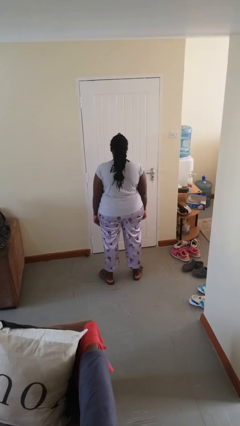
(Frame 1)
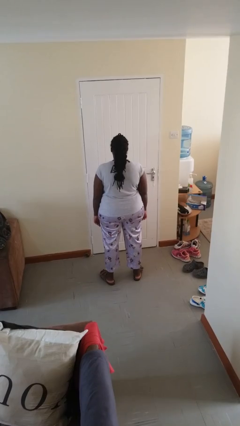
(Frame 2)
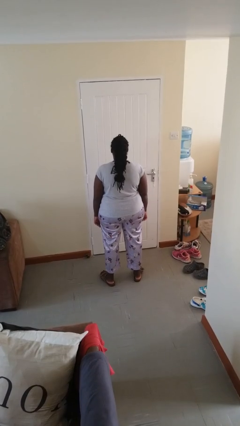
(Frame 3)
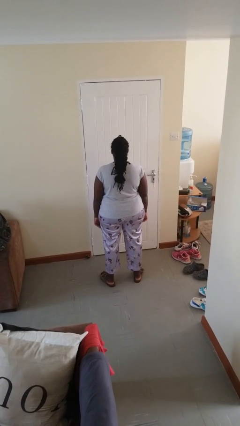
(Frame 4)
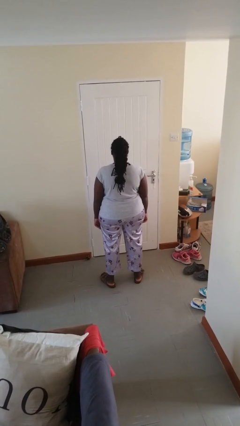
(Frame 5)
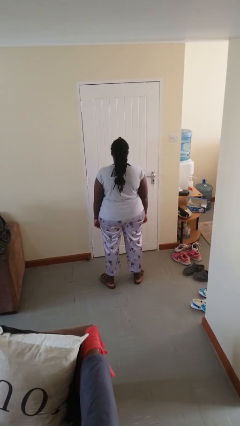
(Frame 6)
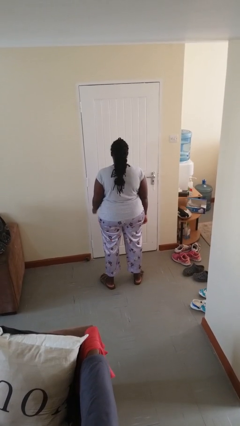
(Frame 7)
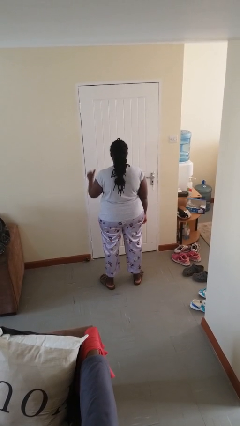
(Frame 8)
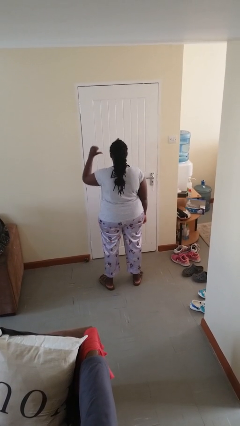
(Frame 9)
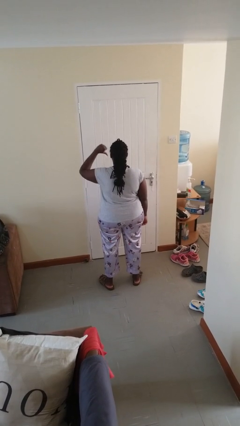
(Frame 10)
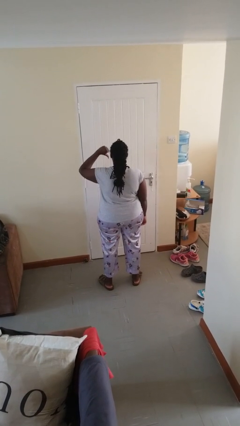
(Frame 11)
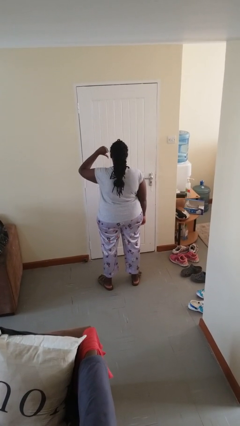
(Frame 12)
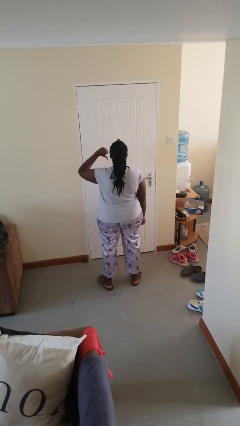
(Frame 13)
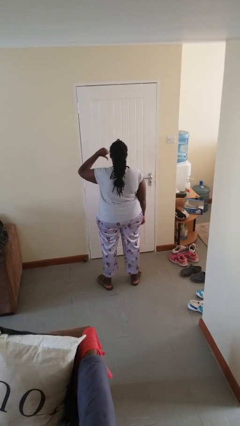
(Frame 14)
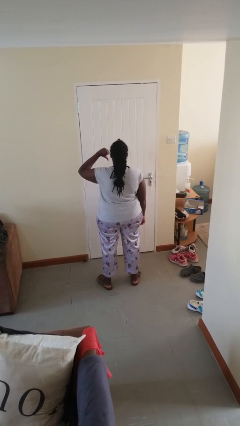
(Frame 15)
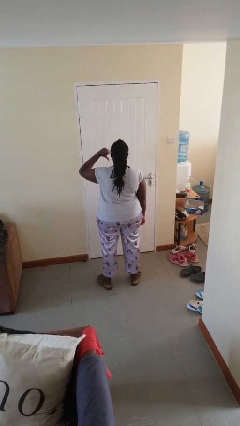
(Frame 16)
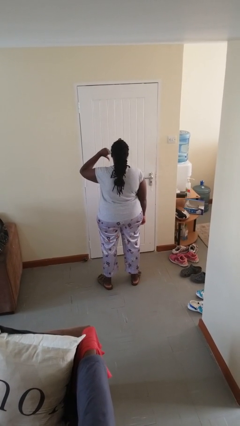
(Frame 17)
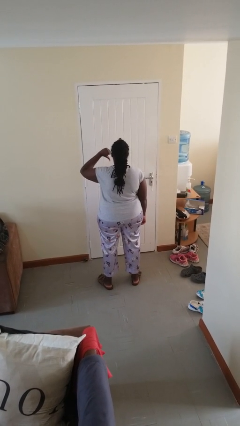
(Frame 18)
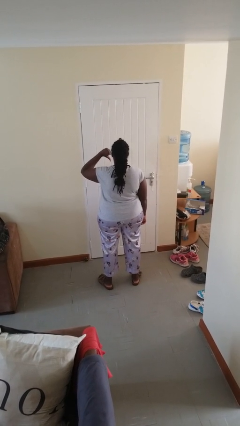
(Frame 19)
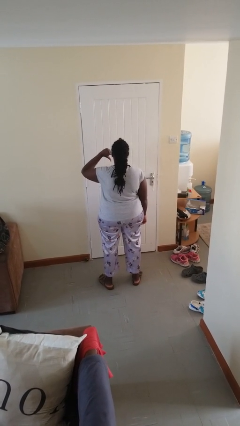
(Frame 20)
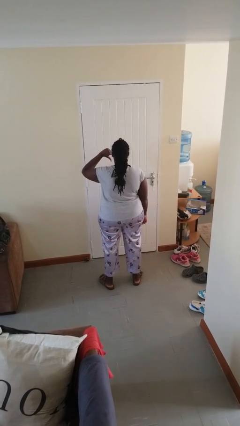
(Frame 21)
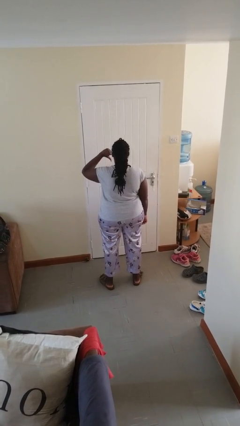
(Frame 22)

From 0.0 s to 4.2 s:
person gestures thumbs down

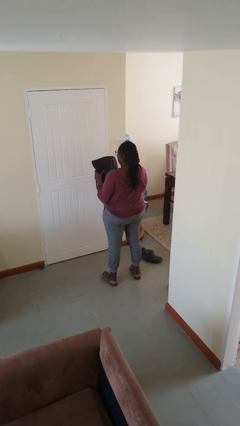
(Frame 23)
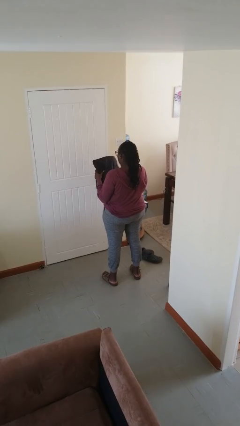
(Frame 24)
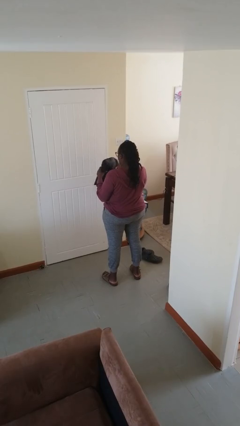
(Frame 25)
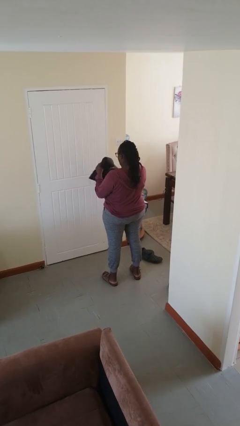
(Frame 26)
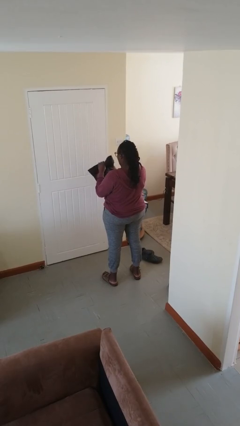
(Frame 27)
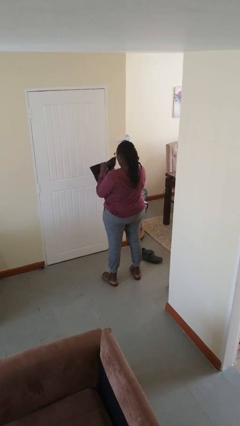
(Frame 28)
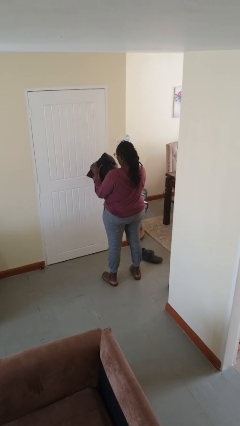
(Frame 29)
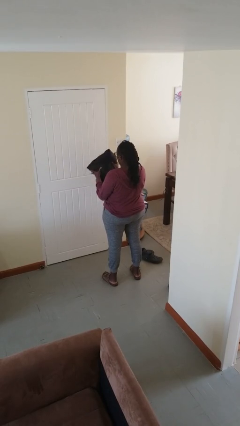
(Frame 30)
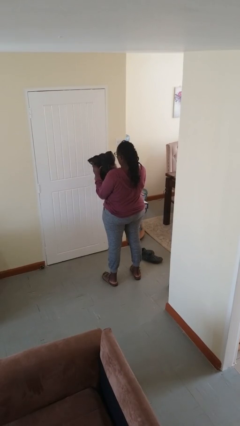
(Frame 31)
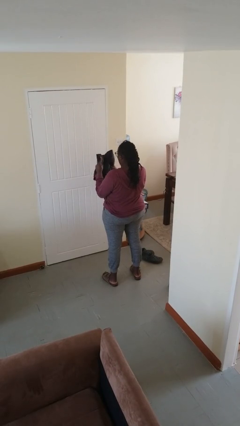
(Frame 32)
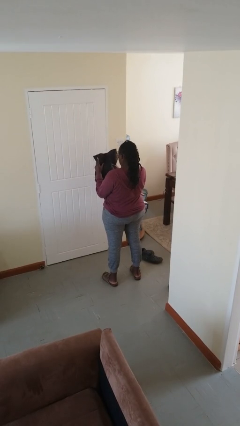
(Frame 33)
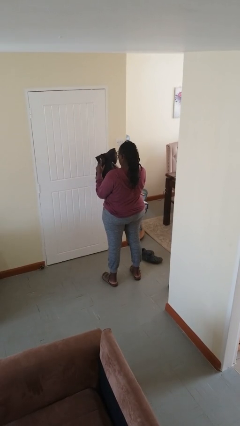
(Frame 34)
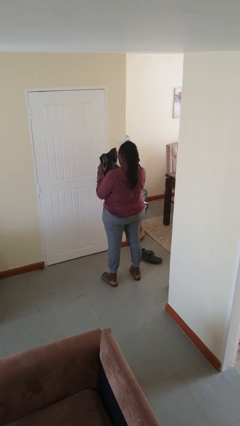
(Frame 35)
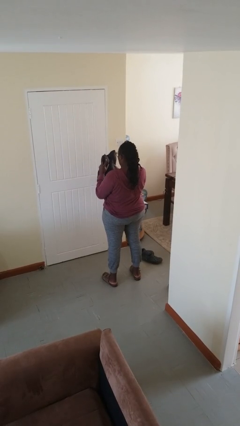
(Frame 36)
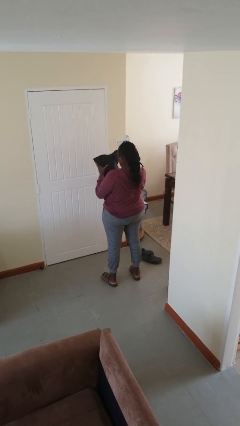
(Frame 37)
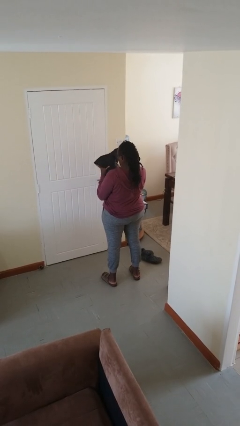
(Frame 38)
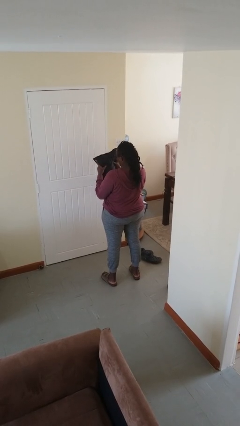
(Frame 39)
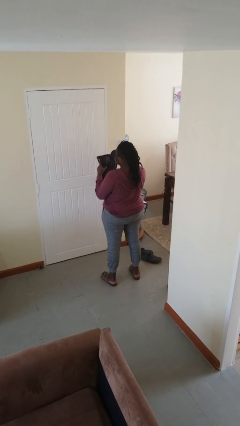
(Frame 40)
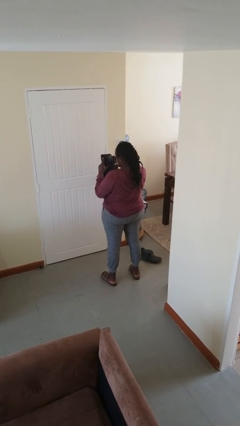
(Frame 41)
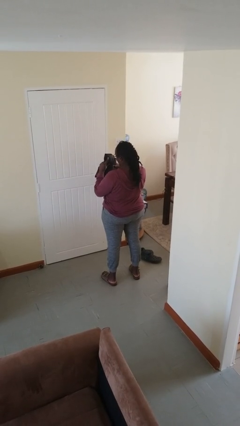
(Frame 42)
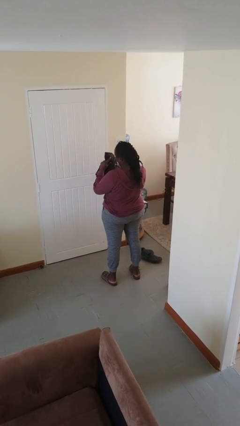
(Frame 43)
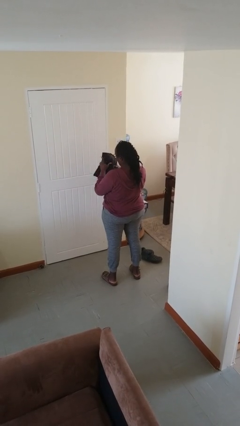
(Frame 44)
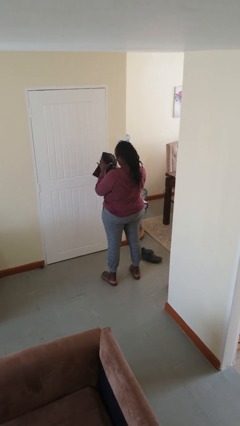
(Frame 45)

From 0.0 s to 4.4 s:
person squeezes object

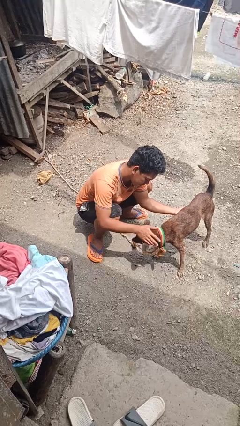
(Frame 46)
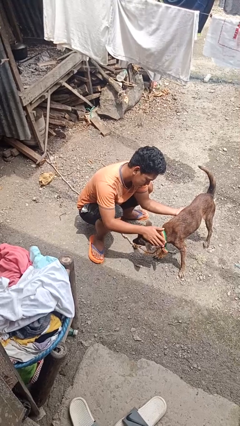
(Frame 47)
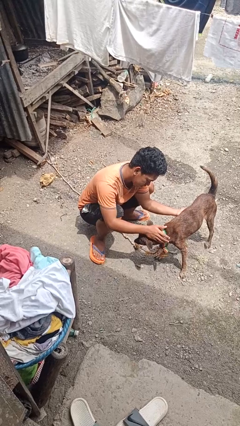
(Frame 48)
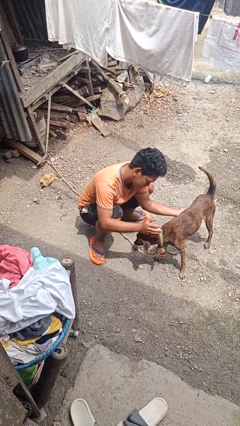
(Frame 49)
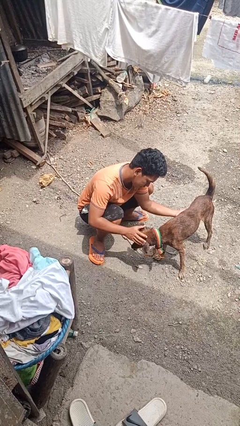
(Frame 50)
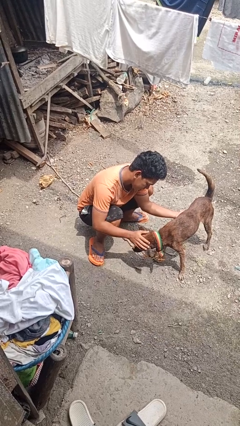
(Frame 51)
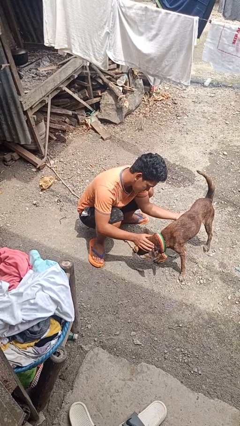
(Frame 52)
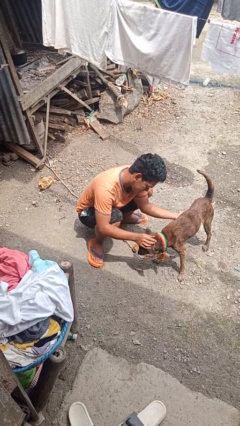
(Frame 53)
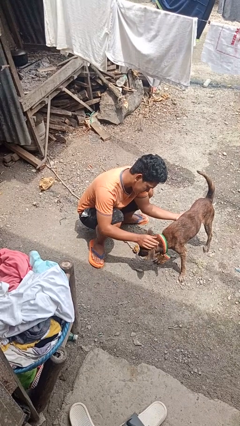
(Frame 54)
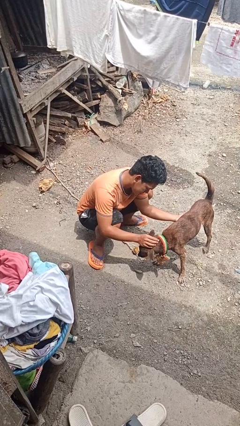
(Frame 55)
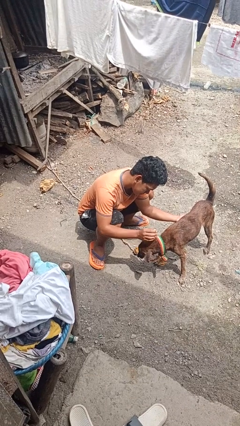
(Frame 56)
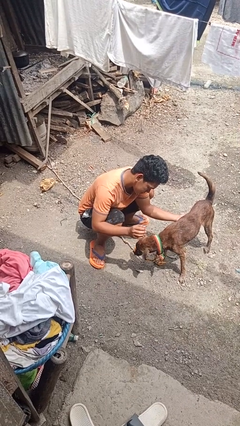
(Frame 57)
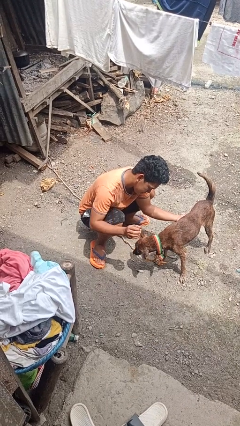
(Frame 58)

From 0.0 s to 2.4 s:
person pets dog

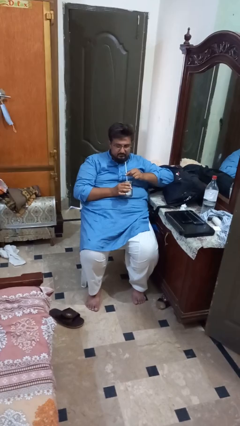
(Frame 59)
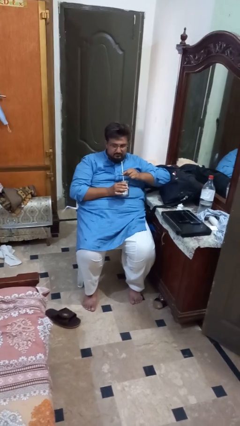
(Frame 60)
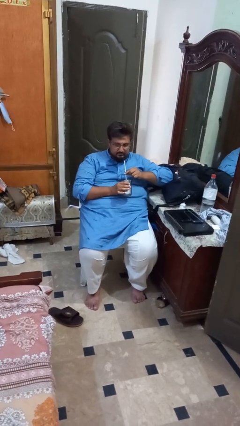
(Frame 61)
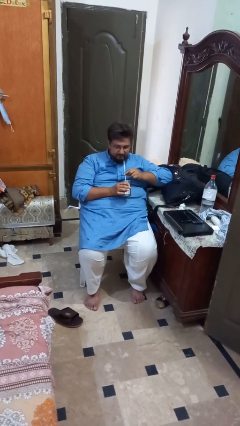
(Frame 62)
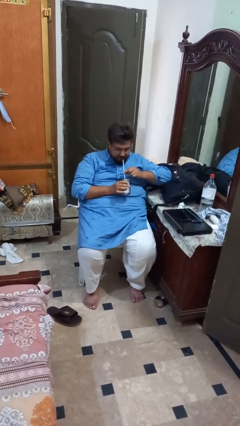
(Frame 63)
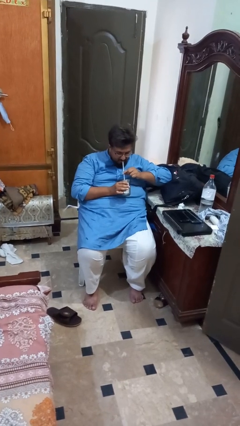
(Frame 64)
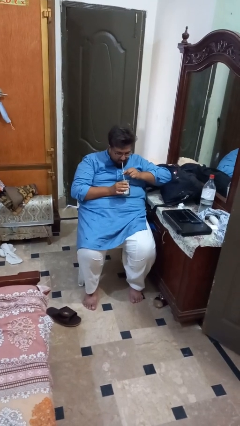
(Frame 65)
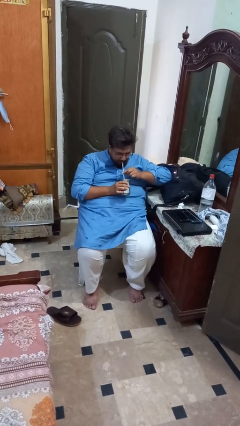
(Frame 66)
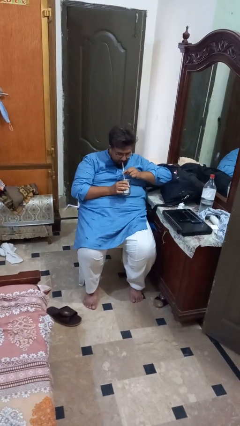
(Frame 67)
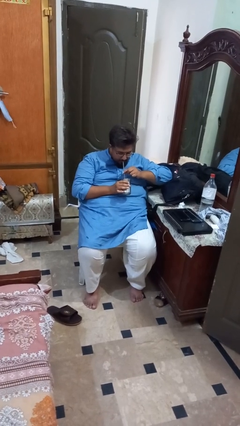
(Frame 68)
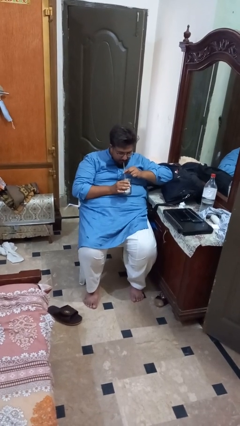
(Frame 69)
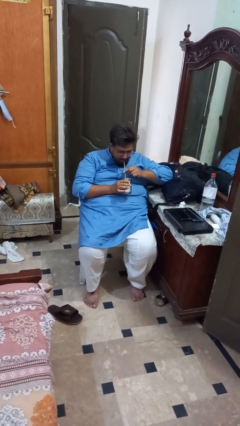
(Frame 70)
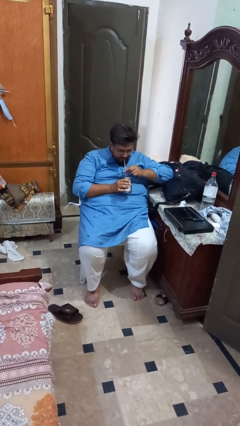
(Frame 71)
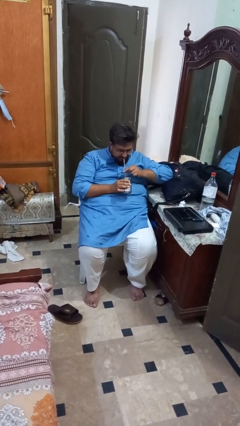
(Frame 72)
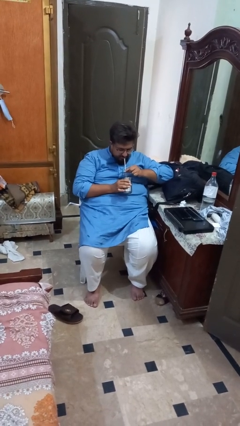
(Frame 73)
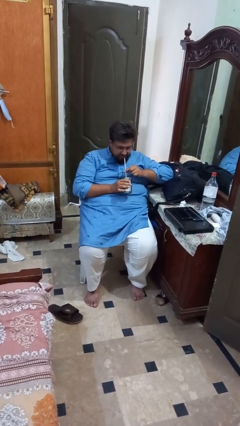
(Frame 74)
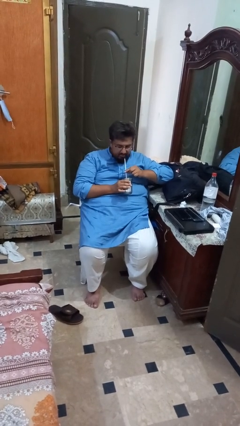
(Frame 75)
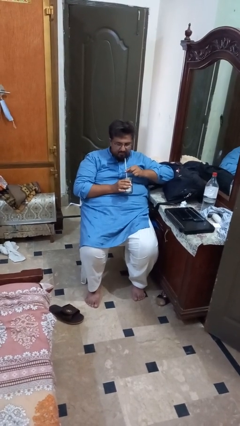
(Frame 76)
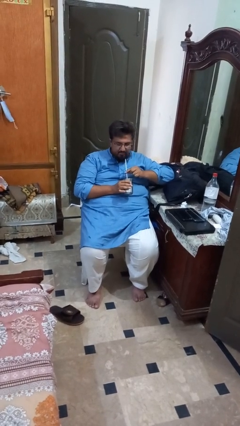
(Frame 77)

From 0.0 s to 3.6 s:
person drinks from straw

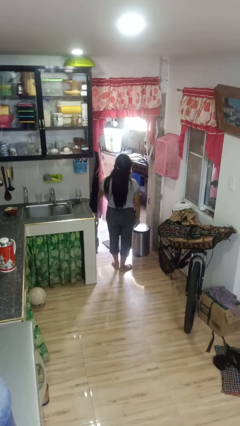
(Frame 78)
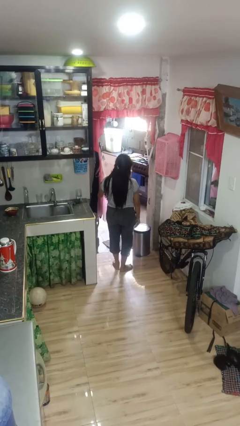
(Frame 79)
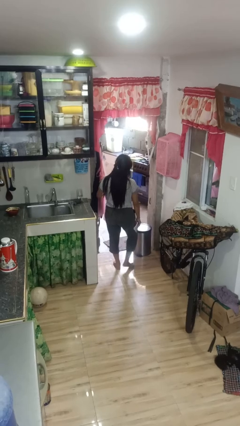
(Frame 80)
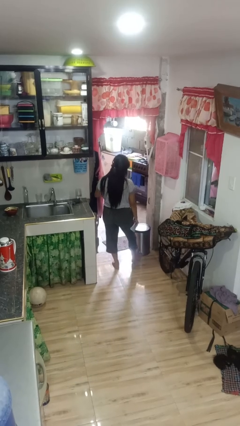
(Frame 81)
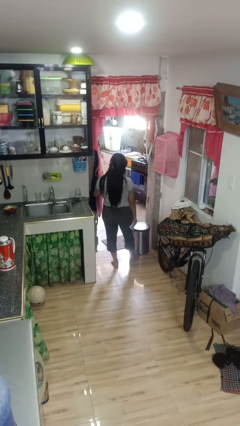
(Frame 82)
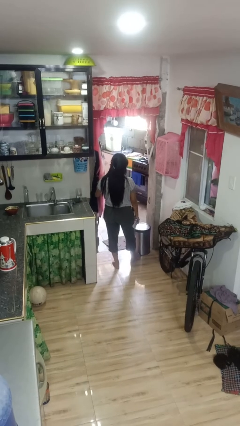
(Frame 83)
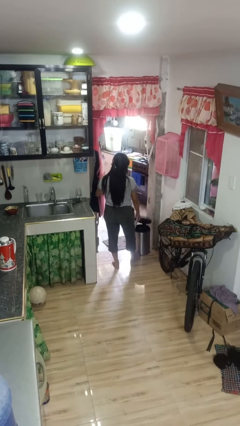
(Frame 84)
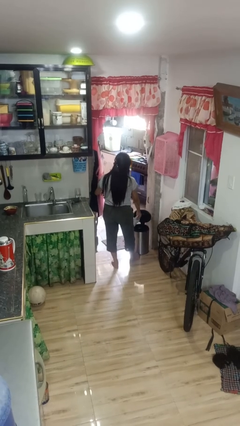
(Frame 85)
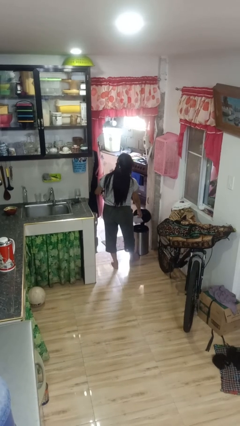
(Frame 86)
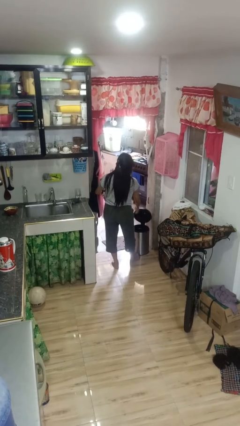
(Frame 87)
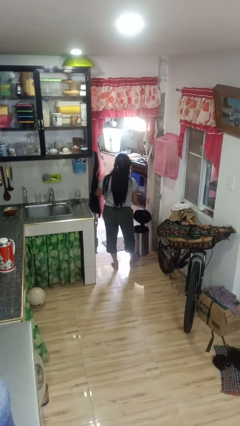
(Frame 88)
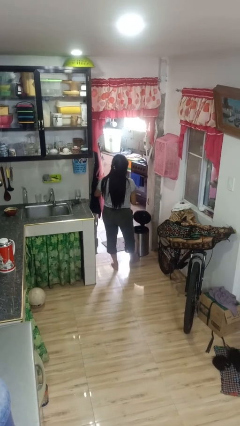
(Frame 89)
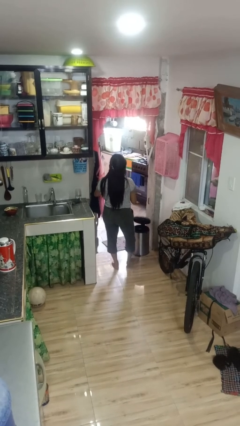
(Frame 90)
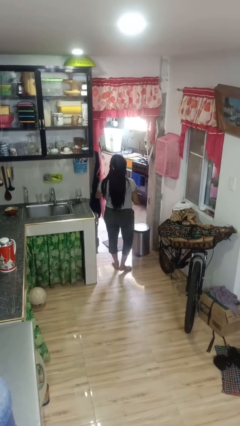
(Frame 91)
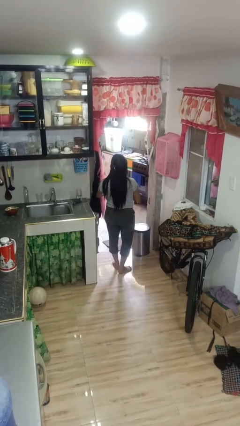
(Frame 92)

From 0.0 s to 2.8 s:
person discards trash

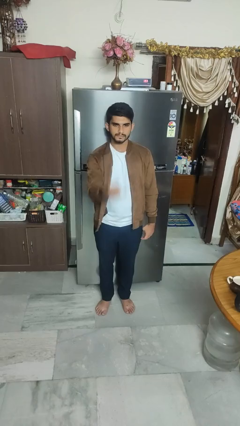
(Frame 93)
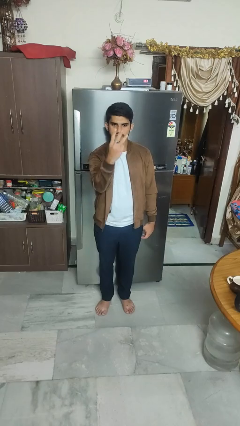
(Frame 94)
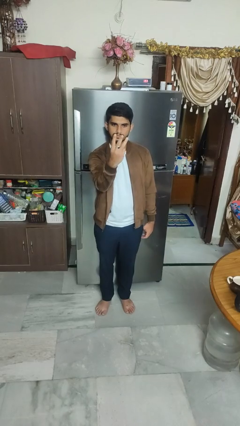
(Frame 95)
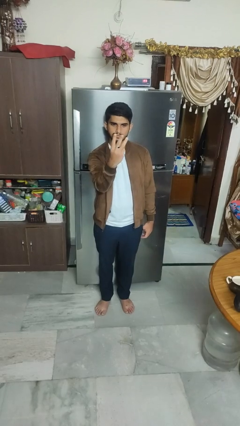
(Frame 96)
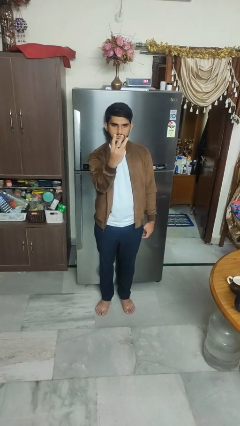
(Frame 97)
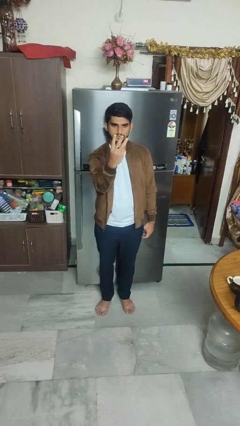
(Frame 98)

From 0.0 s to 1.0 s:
person gestures number three
